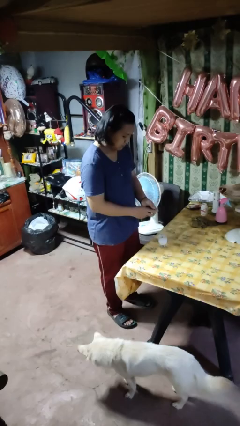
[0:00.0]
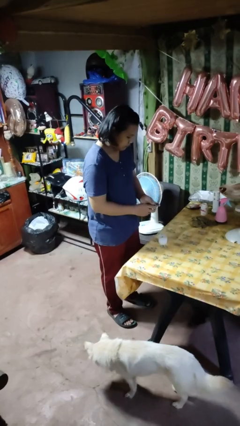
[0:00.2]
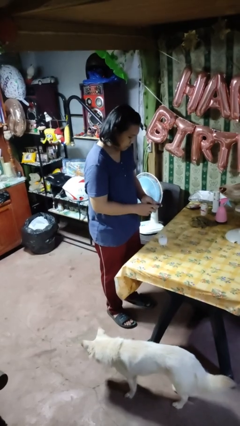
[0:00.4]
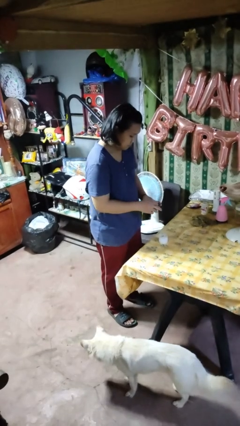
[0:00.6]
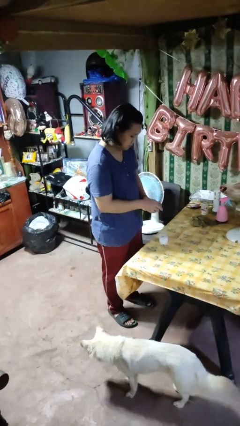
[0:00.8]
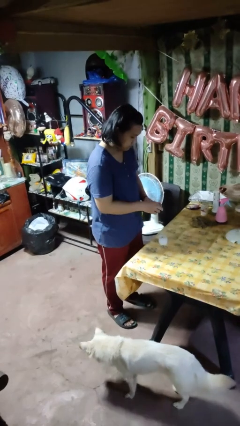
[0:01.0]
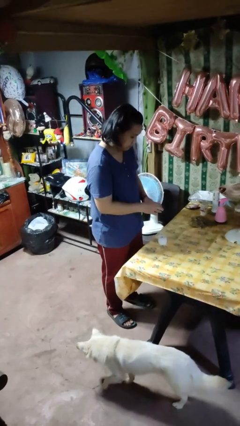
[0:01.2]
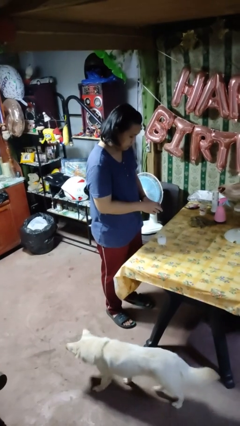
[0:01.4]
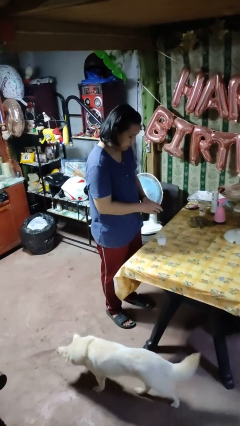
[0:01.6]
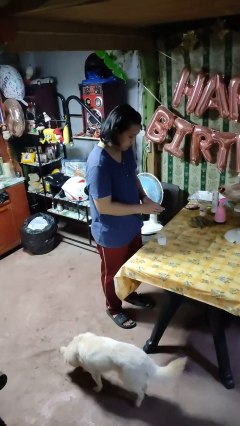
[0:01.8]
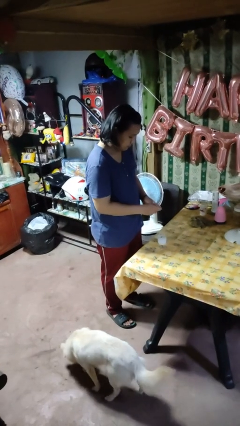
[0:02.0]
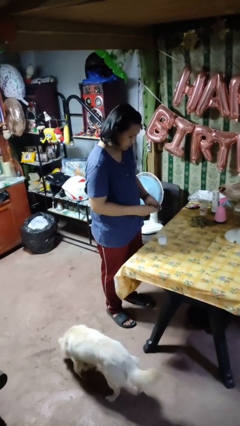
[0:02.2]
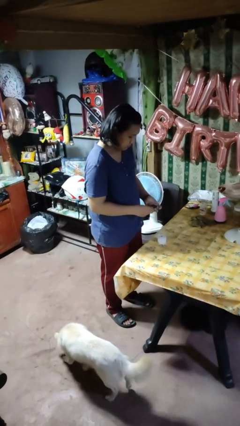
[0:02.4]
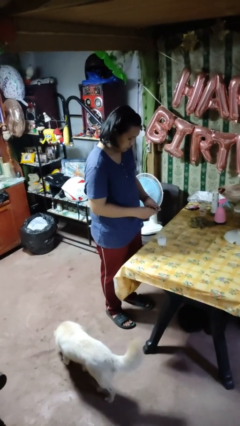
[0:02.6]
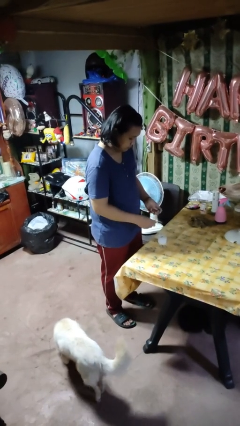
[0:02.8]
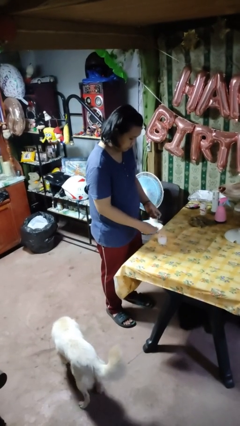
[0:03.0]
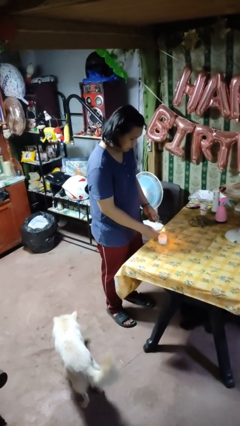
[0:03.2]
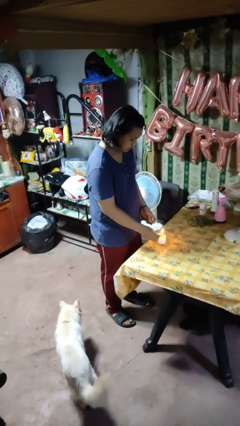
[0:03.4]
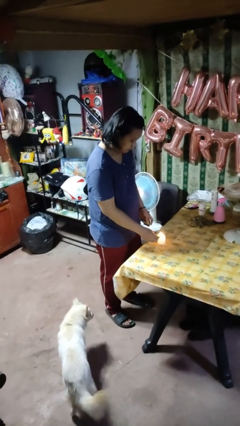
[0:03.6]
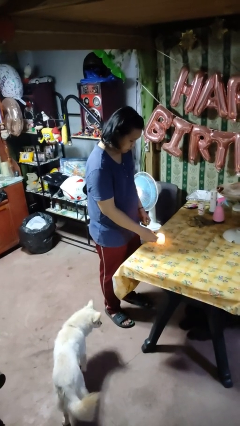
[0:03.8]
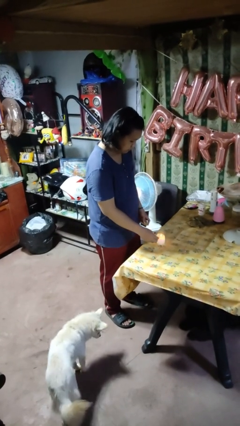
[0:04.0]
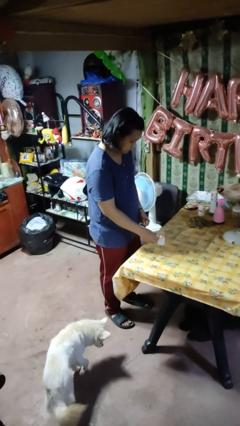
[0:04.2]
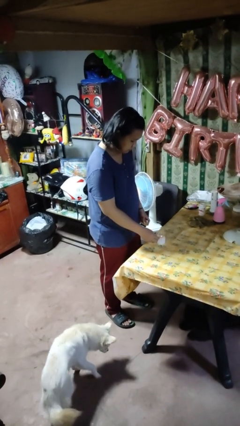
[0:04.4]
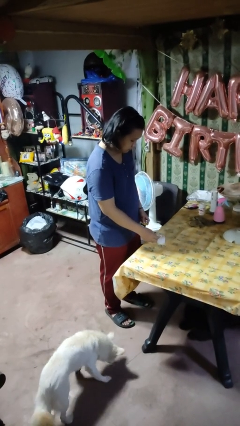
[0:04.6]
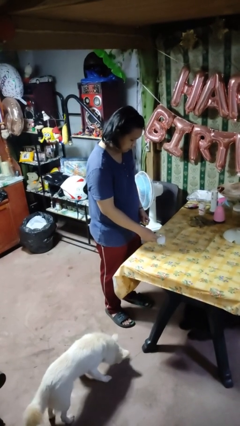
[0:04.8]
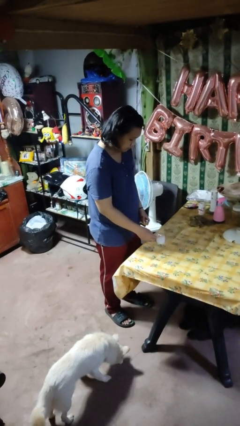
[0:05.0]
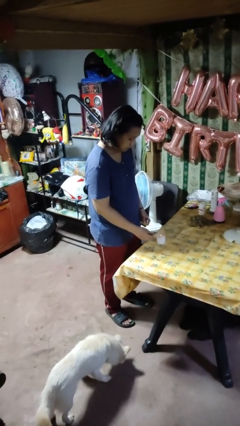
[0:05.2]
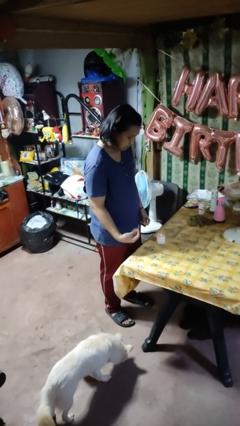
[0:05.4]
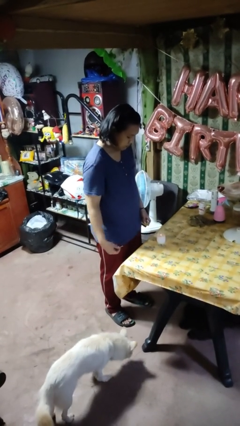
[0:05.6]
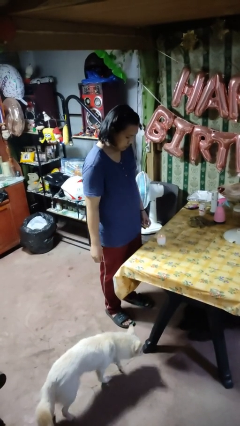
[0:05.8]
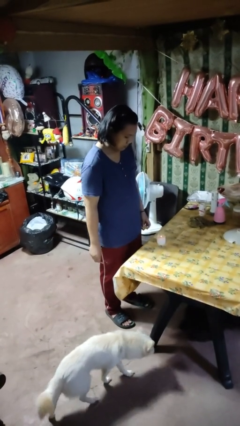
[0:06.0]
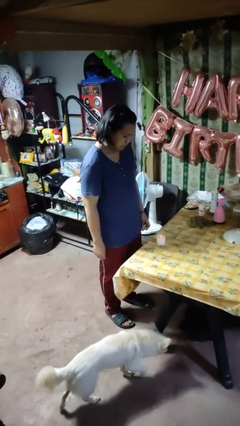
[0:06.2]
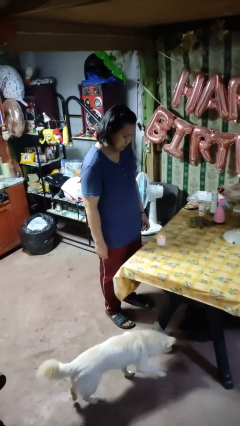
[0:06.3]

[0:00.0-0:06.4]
person lights candle

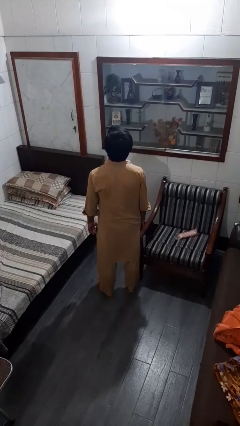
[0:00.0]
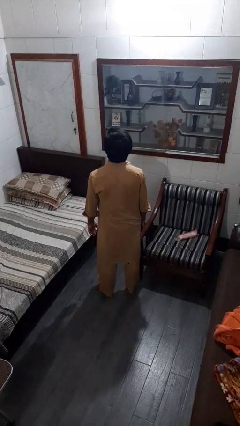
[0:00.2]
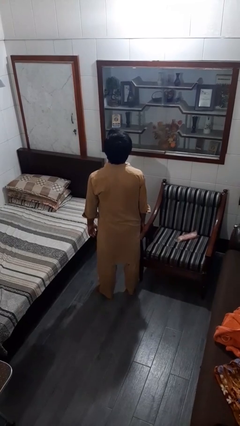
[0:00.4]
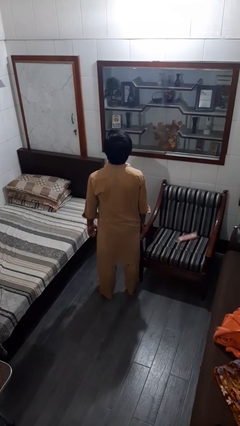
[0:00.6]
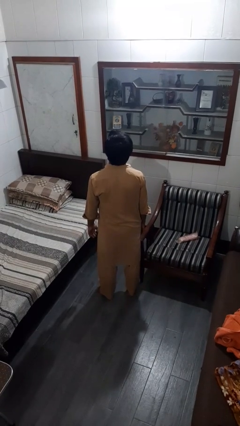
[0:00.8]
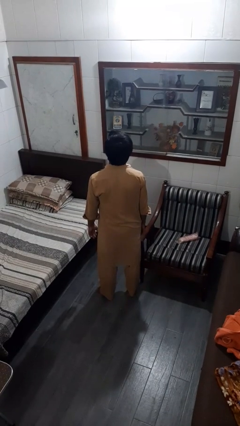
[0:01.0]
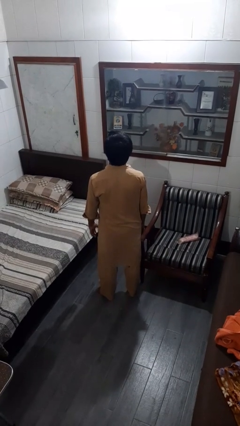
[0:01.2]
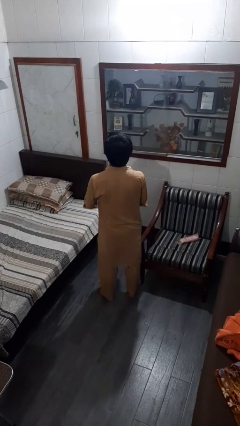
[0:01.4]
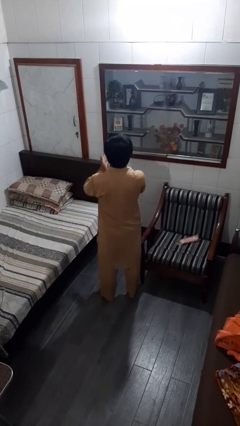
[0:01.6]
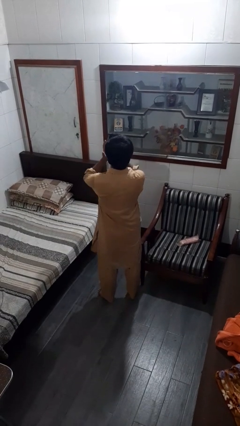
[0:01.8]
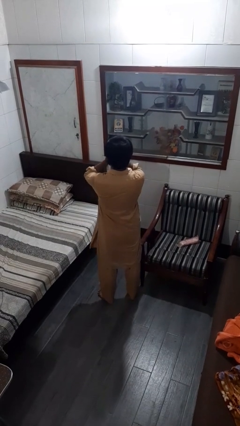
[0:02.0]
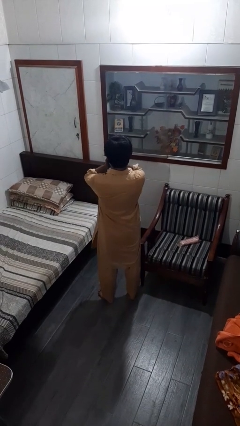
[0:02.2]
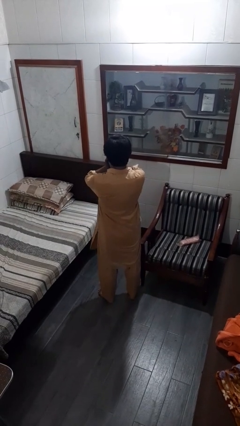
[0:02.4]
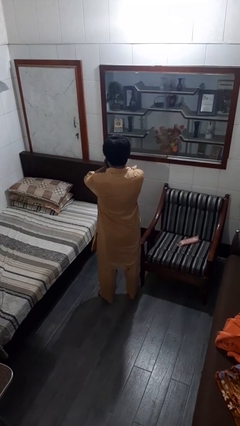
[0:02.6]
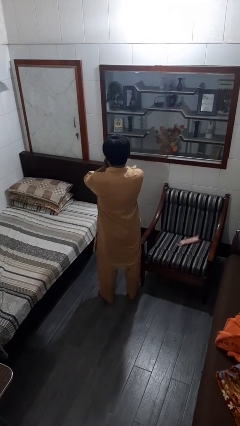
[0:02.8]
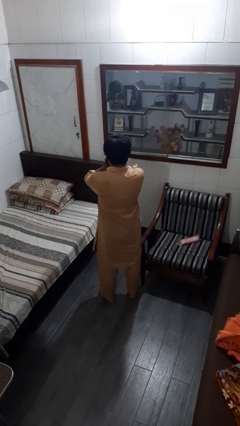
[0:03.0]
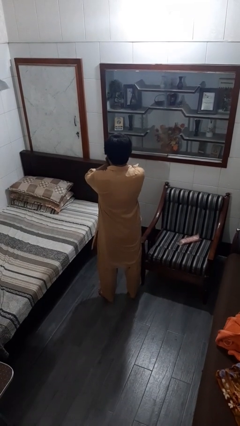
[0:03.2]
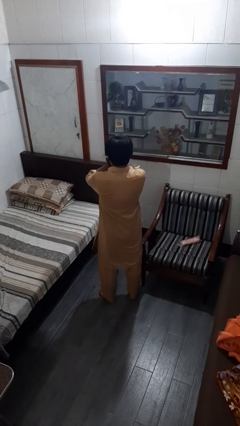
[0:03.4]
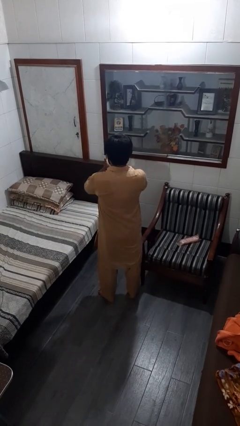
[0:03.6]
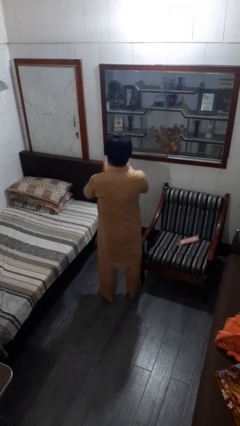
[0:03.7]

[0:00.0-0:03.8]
person covers face with hands

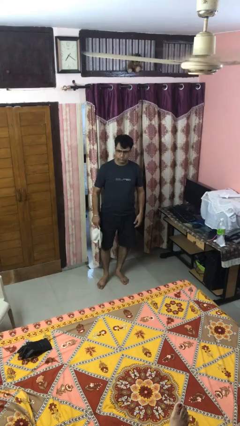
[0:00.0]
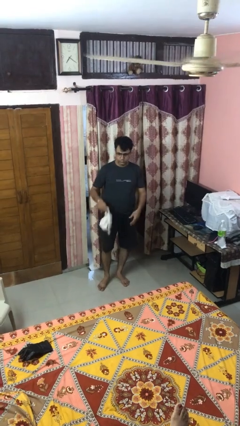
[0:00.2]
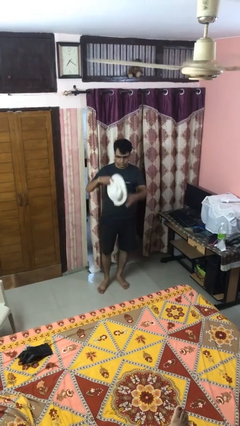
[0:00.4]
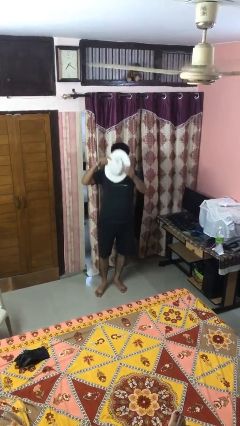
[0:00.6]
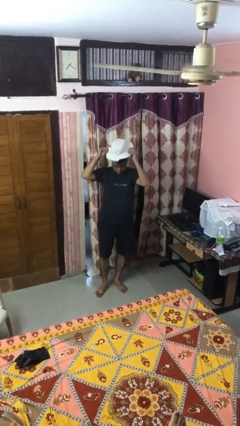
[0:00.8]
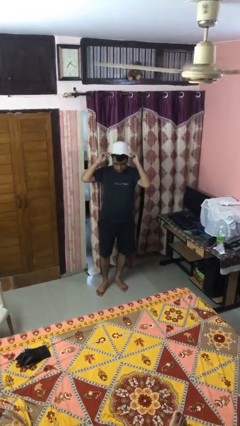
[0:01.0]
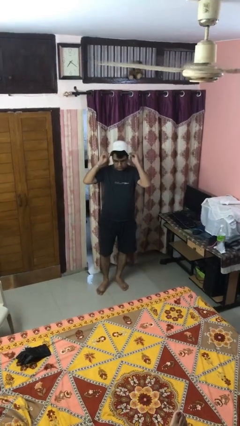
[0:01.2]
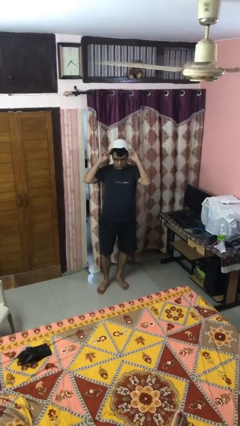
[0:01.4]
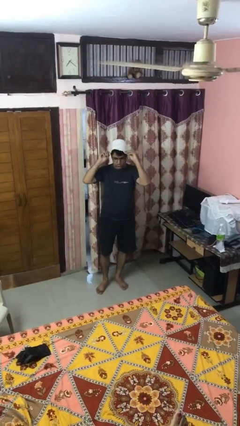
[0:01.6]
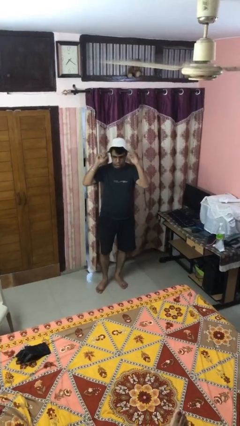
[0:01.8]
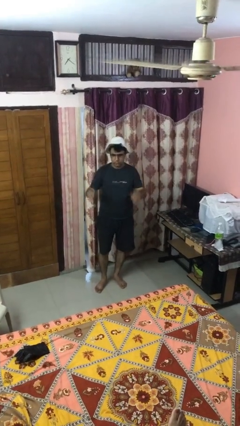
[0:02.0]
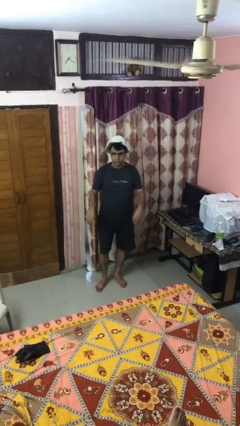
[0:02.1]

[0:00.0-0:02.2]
person puts on hat

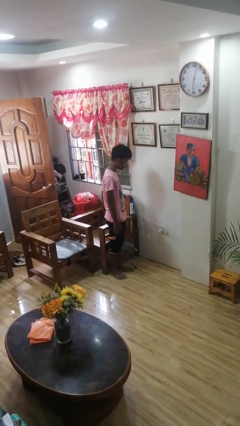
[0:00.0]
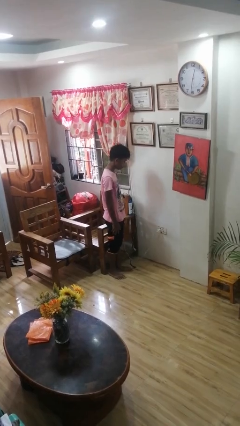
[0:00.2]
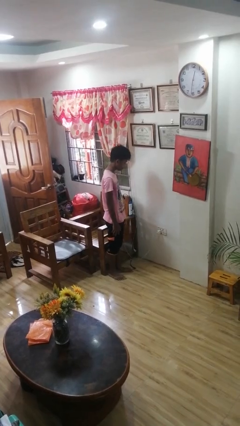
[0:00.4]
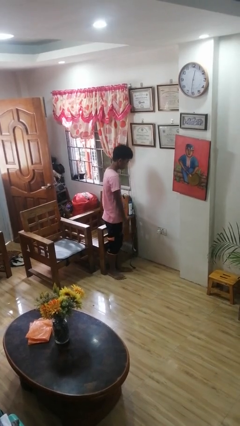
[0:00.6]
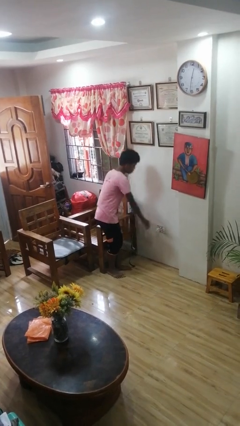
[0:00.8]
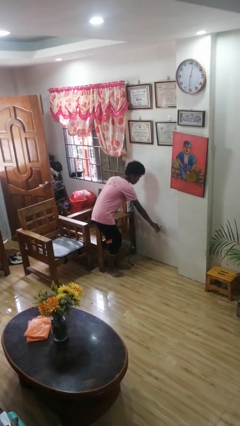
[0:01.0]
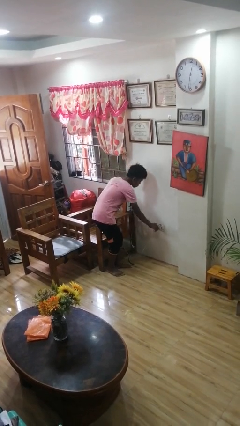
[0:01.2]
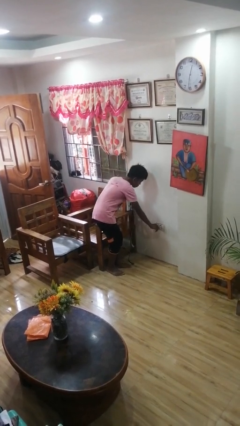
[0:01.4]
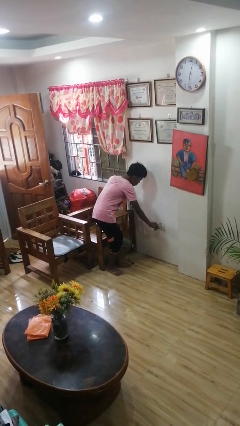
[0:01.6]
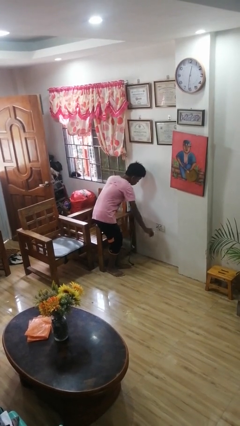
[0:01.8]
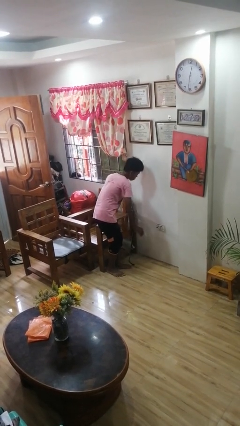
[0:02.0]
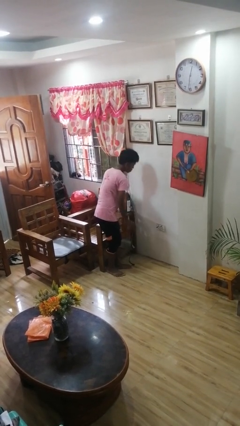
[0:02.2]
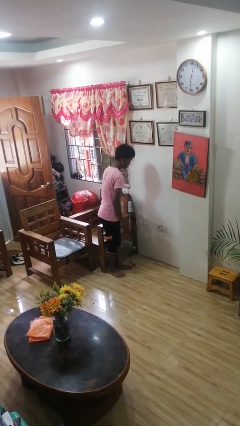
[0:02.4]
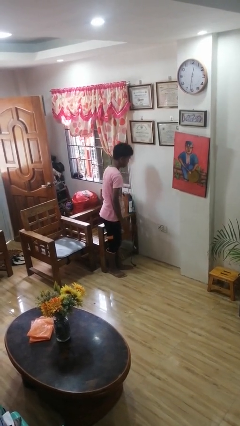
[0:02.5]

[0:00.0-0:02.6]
person unplugs from electrical socket

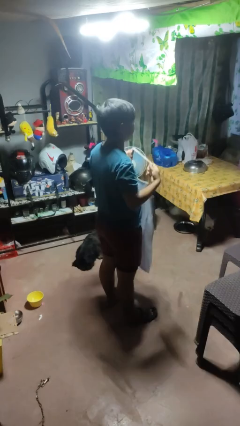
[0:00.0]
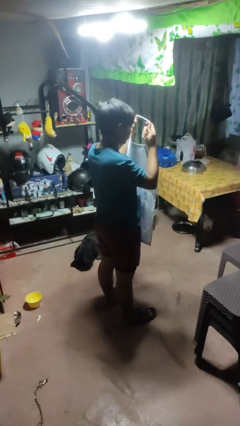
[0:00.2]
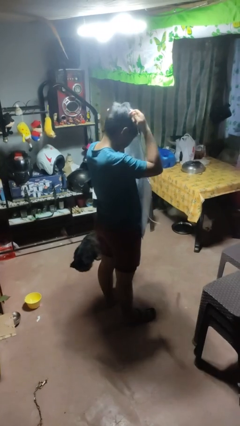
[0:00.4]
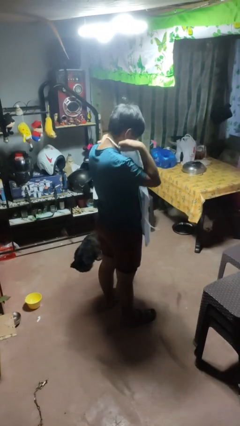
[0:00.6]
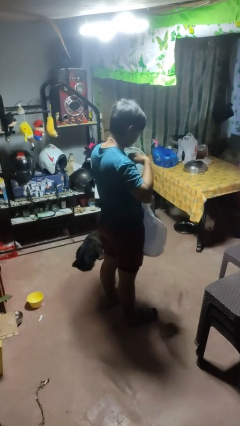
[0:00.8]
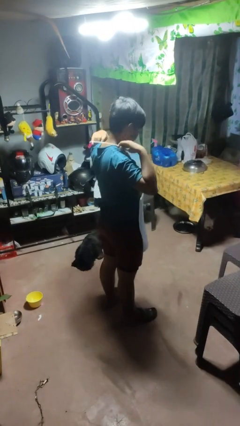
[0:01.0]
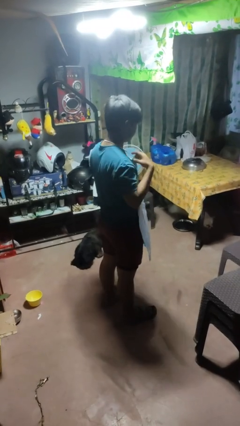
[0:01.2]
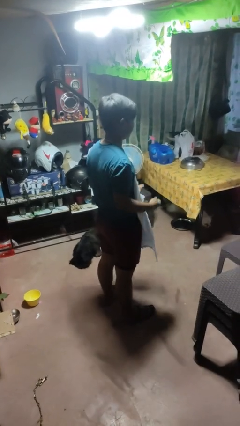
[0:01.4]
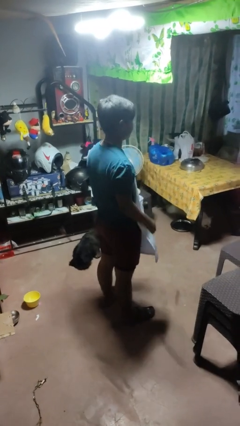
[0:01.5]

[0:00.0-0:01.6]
person puts on apron

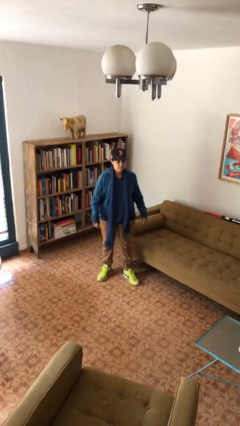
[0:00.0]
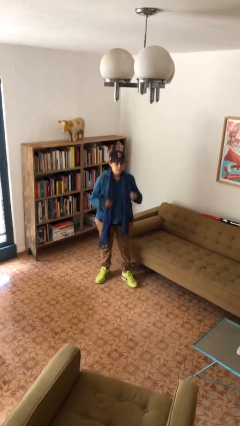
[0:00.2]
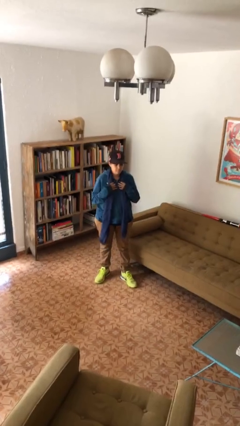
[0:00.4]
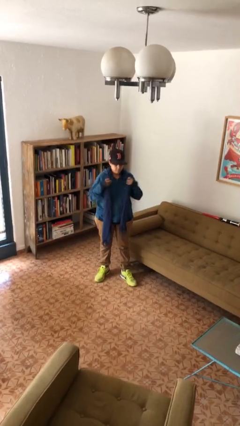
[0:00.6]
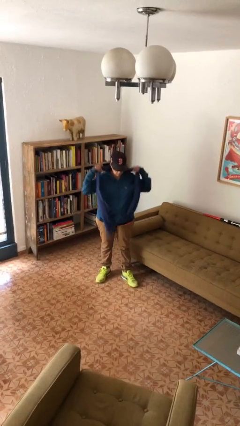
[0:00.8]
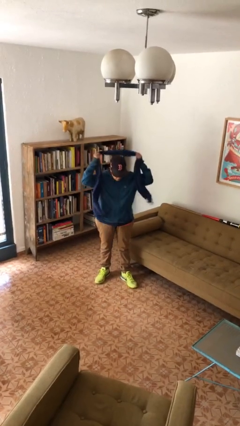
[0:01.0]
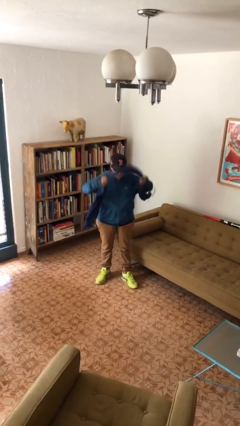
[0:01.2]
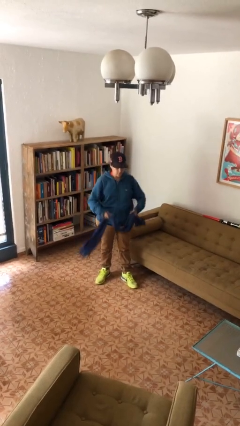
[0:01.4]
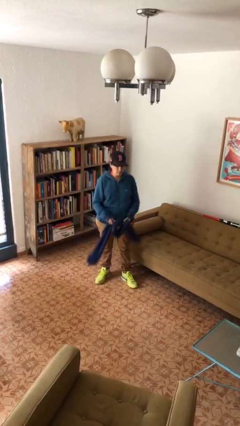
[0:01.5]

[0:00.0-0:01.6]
person takes off scarf
